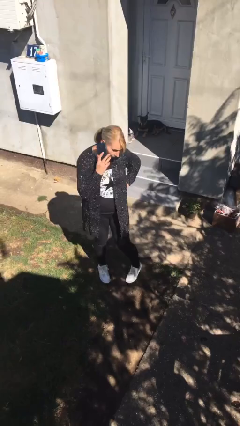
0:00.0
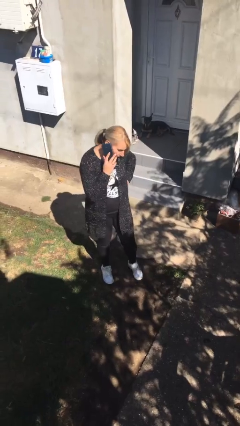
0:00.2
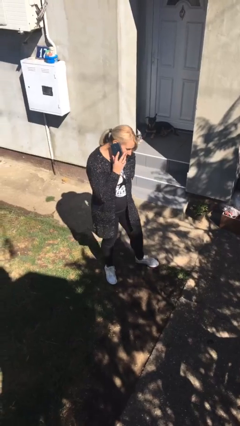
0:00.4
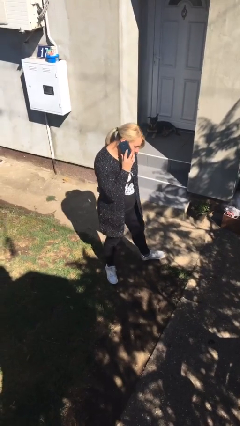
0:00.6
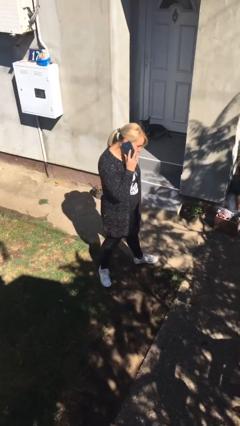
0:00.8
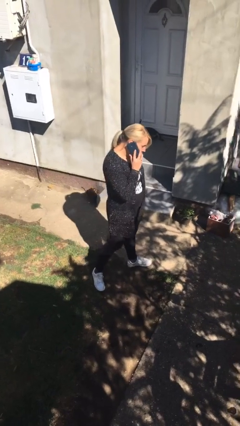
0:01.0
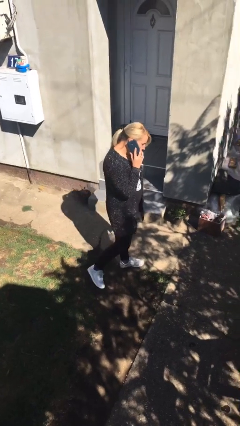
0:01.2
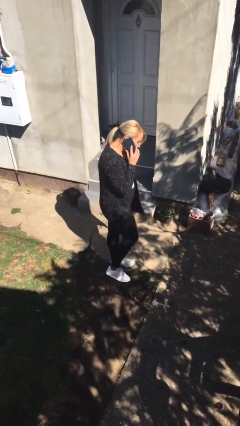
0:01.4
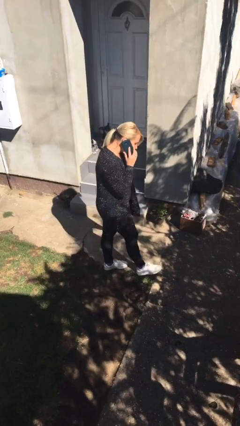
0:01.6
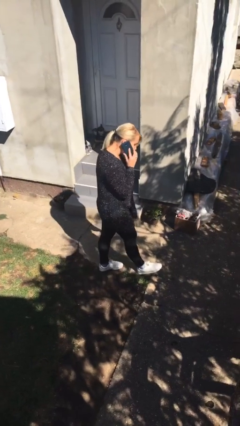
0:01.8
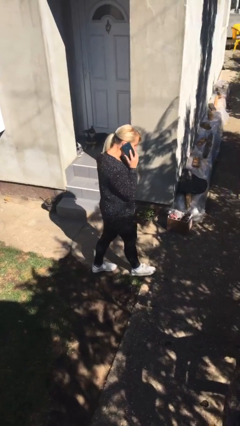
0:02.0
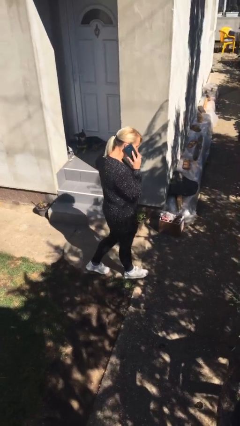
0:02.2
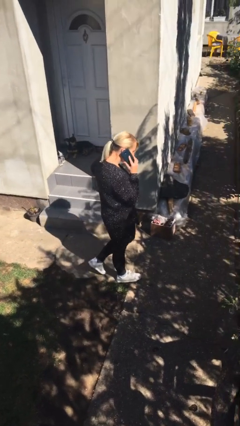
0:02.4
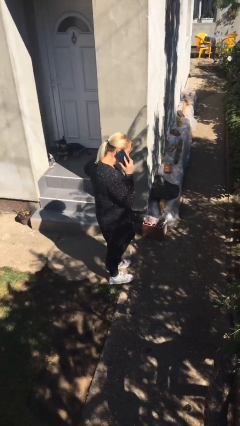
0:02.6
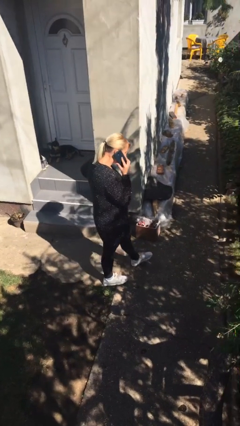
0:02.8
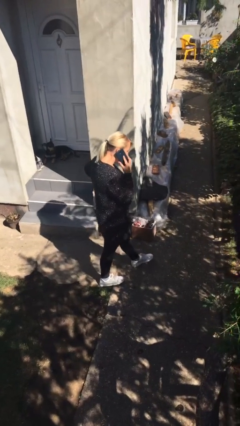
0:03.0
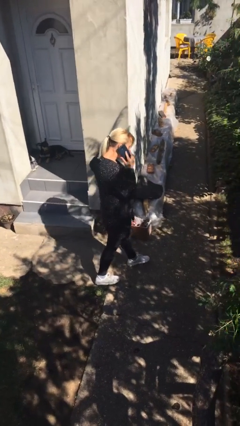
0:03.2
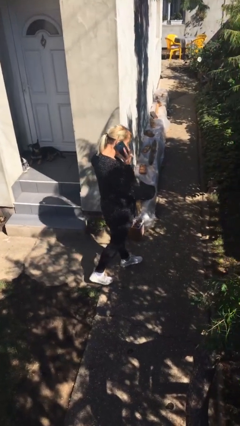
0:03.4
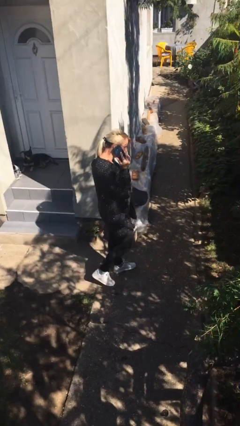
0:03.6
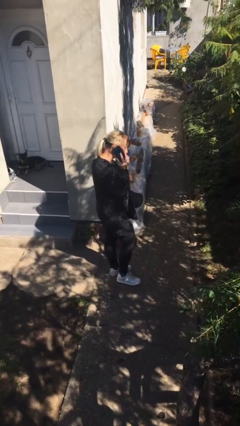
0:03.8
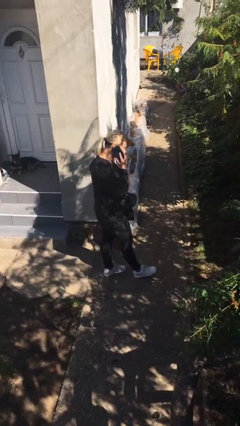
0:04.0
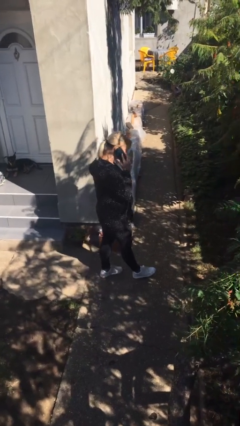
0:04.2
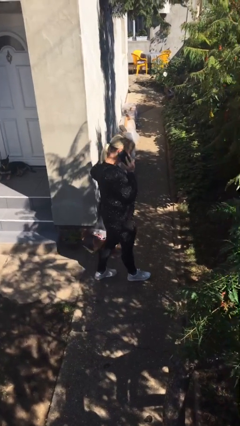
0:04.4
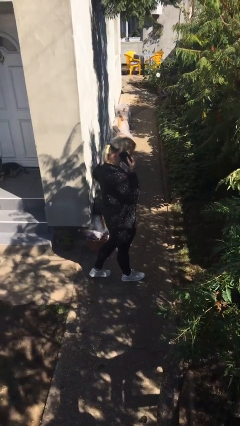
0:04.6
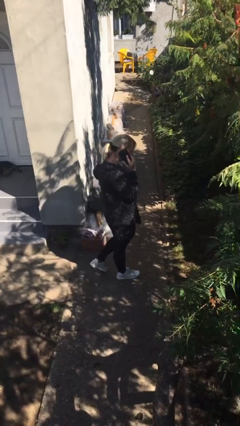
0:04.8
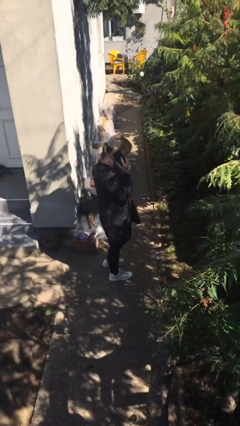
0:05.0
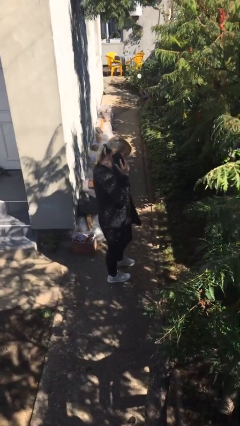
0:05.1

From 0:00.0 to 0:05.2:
person talks on phone

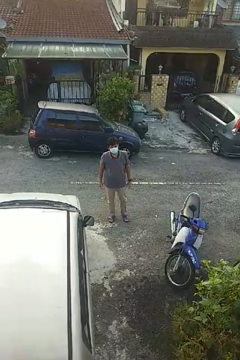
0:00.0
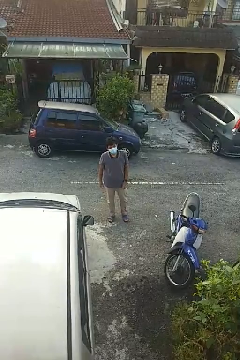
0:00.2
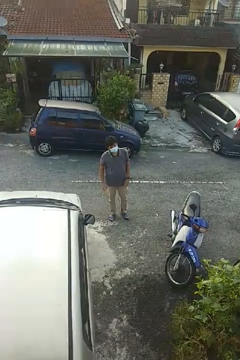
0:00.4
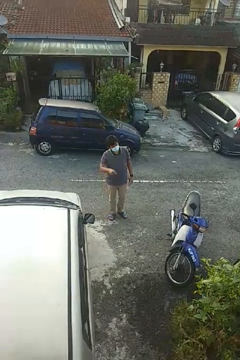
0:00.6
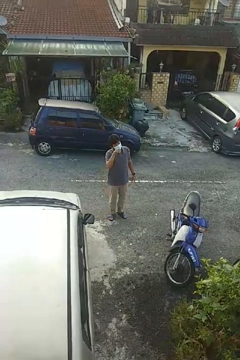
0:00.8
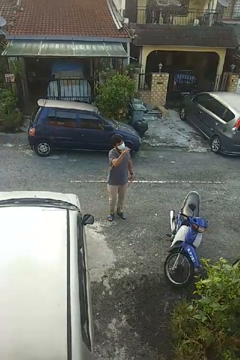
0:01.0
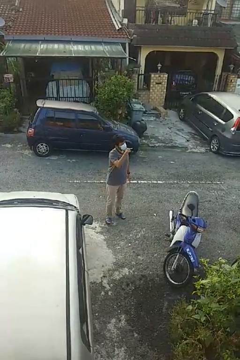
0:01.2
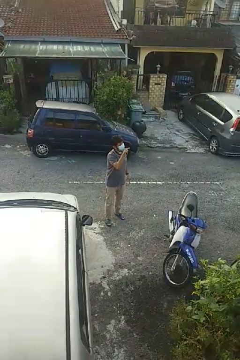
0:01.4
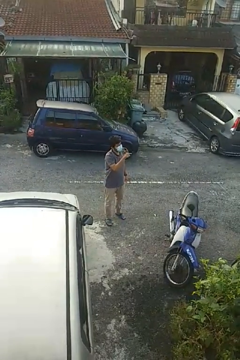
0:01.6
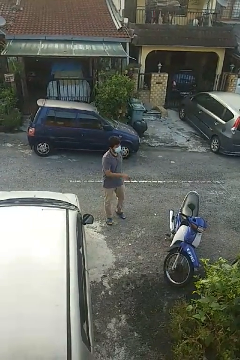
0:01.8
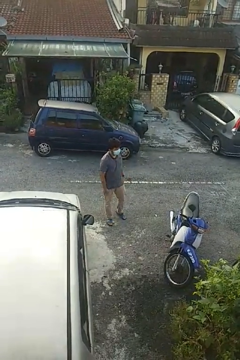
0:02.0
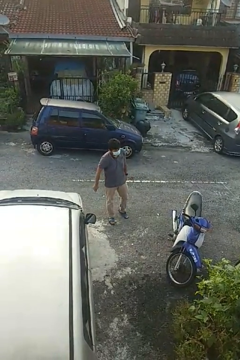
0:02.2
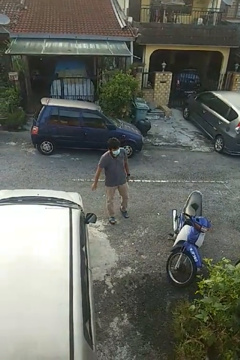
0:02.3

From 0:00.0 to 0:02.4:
person points at person

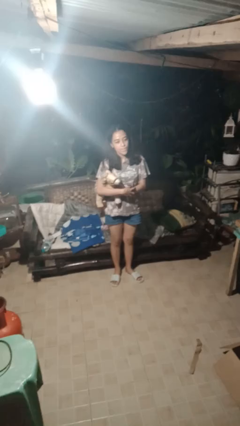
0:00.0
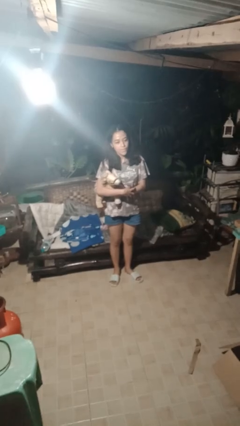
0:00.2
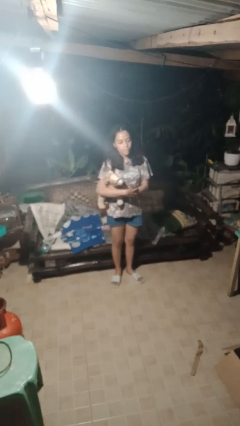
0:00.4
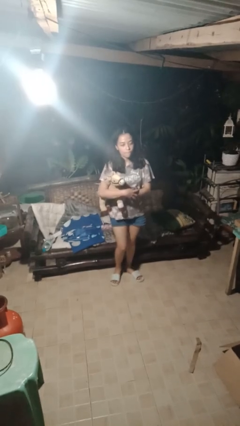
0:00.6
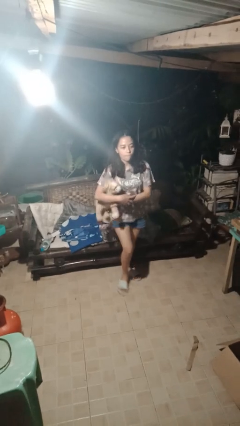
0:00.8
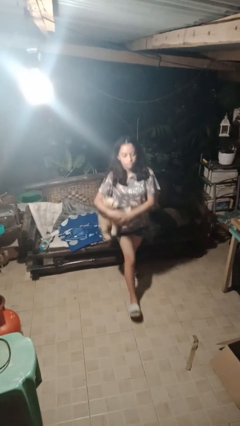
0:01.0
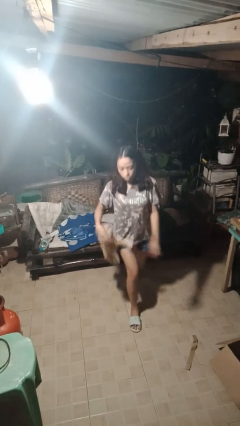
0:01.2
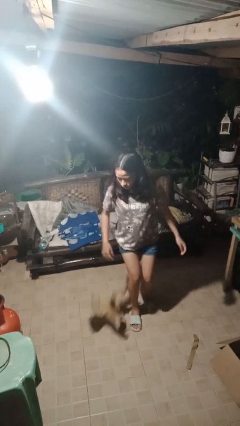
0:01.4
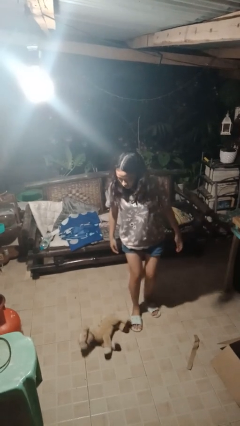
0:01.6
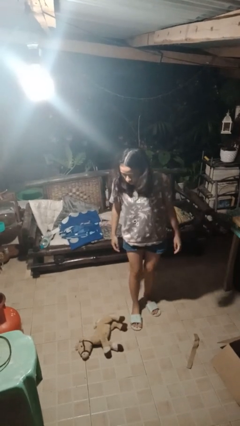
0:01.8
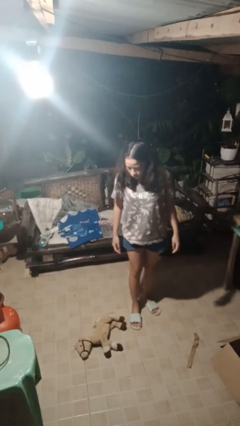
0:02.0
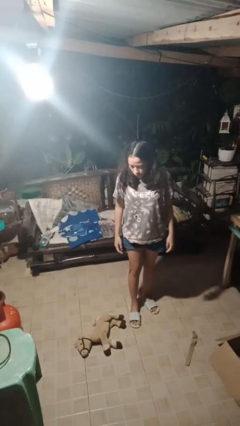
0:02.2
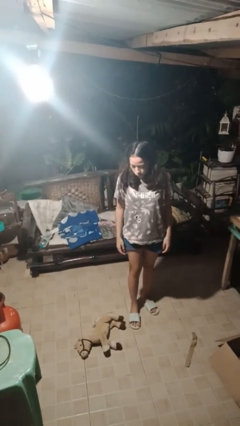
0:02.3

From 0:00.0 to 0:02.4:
person drops object

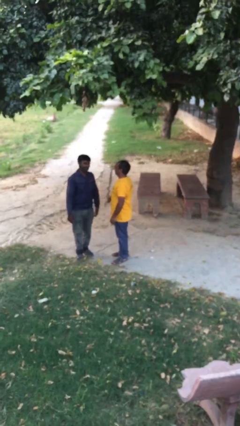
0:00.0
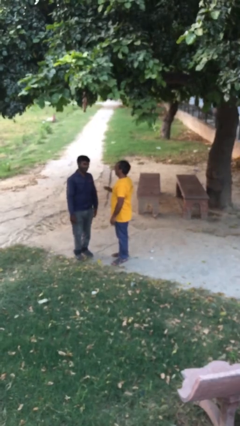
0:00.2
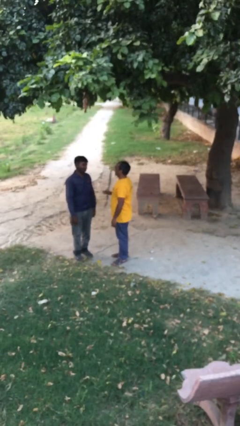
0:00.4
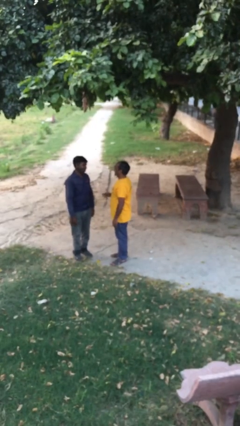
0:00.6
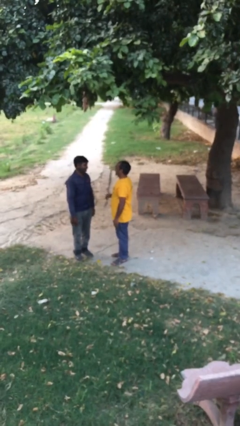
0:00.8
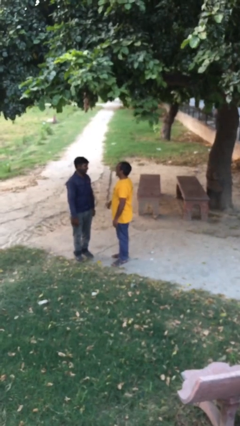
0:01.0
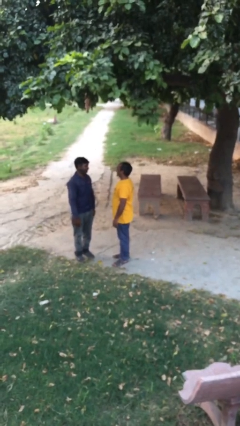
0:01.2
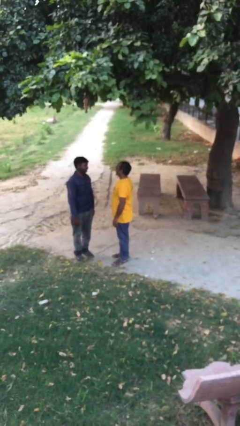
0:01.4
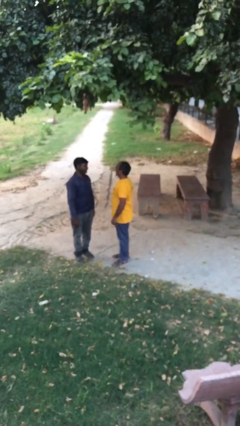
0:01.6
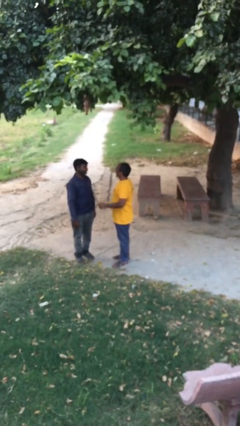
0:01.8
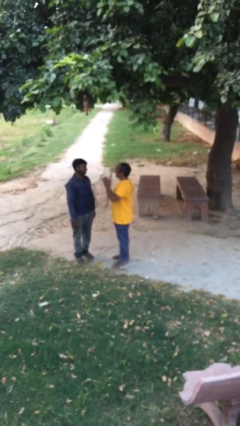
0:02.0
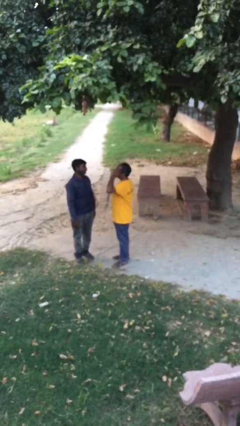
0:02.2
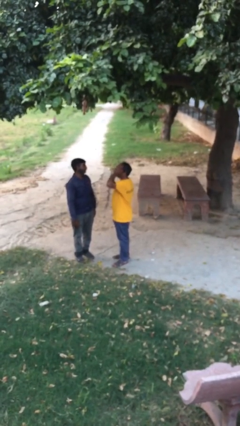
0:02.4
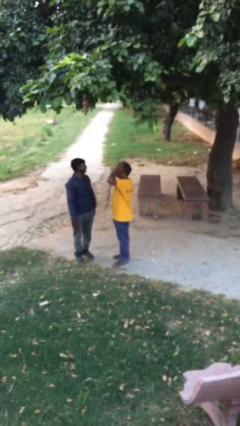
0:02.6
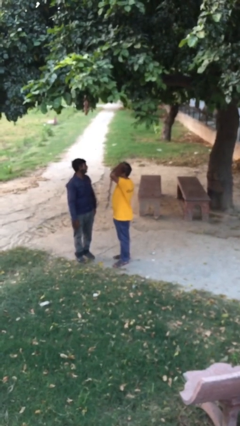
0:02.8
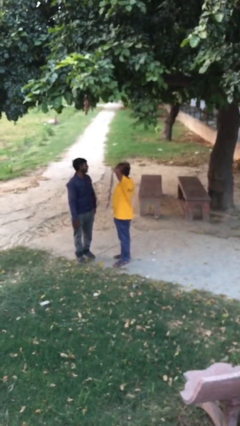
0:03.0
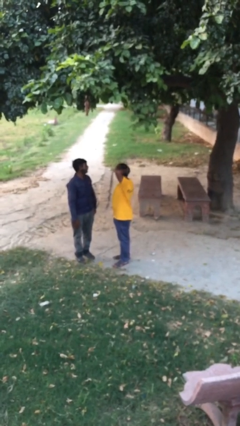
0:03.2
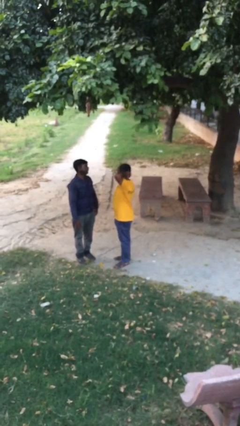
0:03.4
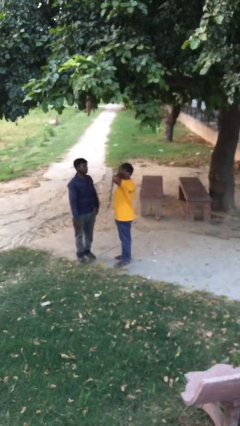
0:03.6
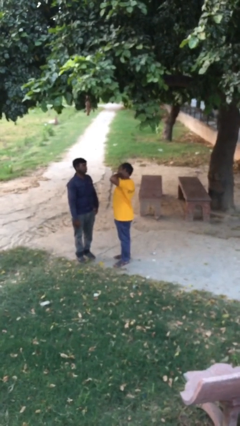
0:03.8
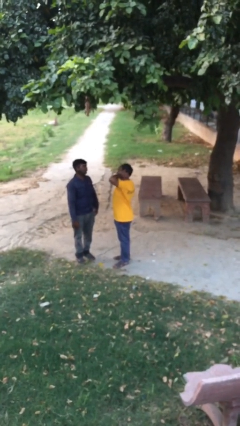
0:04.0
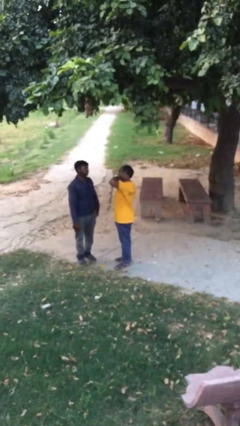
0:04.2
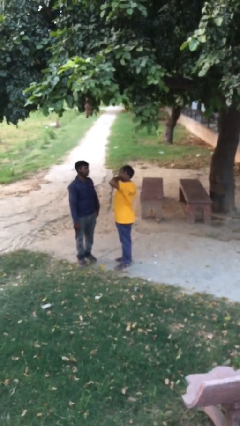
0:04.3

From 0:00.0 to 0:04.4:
person talks to person

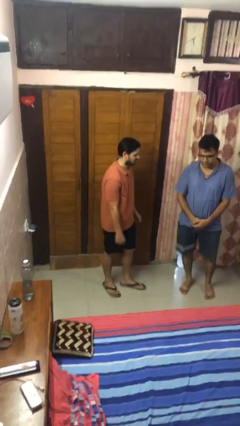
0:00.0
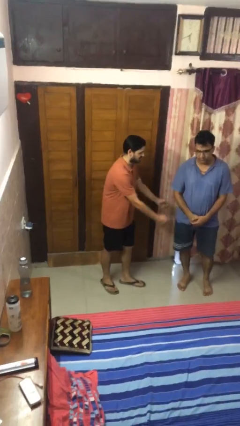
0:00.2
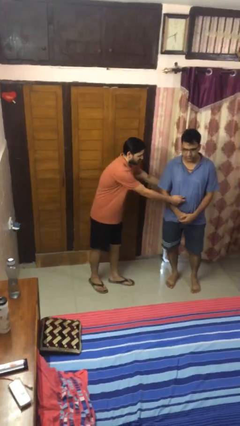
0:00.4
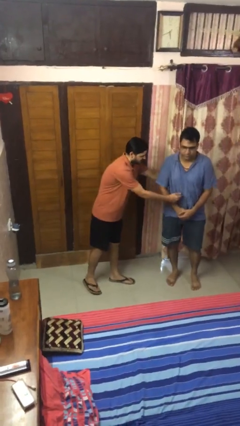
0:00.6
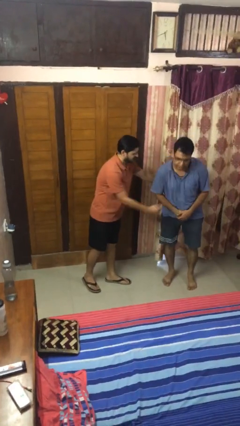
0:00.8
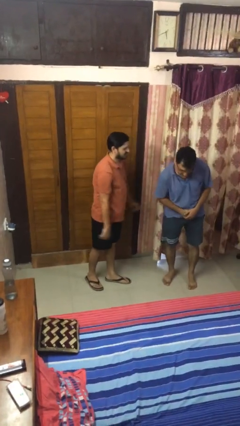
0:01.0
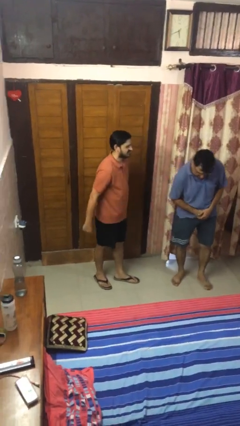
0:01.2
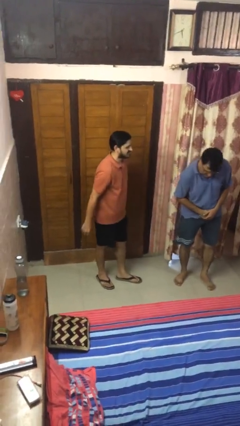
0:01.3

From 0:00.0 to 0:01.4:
person tickles person

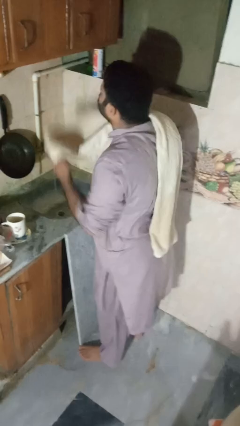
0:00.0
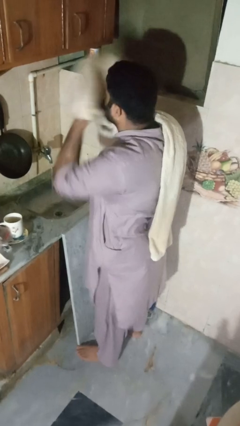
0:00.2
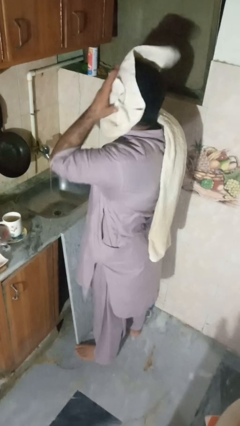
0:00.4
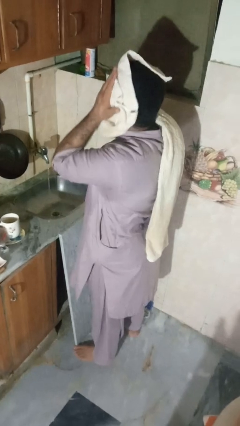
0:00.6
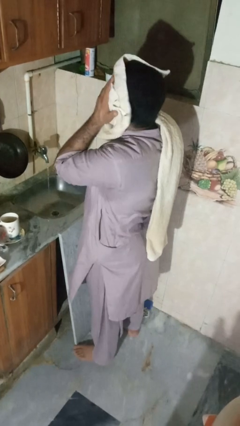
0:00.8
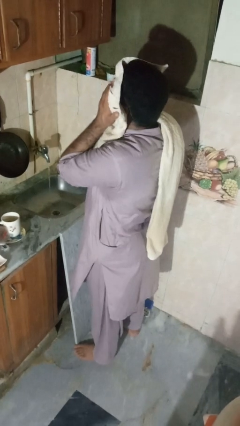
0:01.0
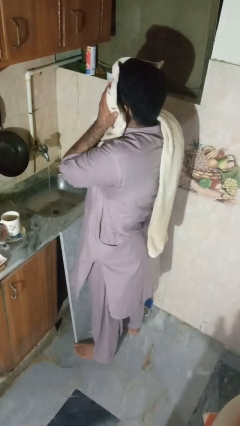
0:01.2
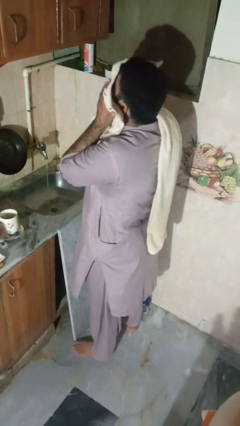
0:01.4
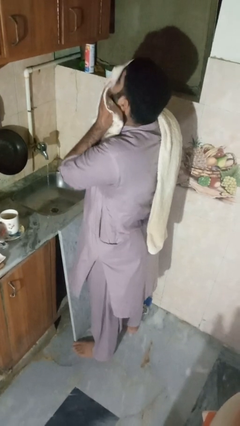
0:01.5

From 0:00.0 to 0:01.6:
person dries face with towel
